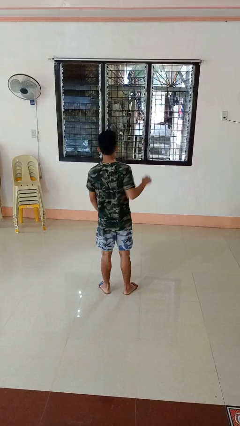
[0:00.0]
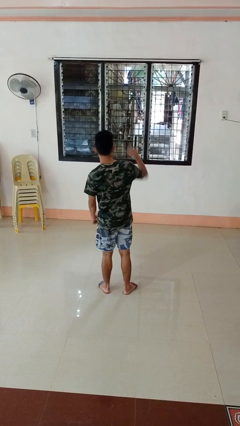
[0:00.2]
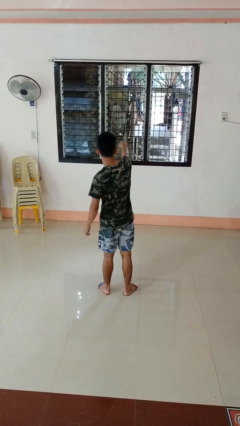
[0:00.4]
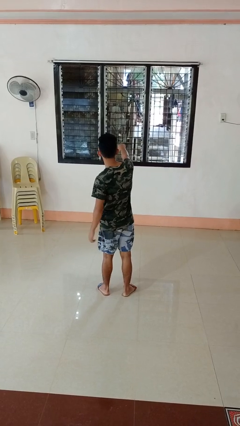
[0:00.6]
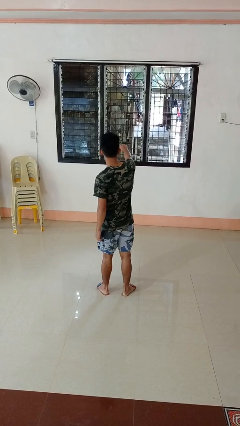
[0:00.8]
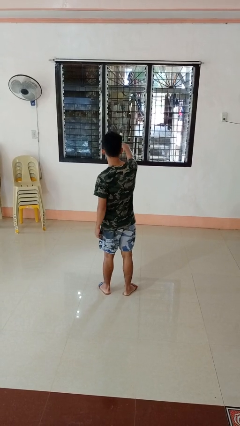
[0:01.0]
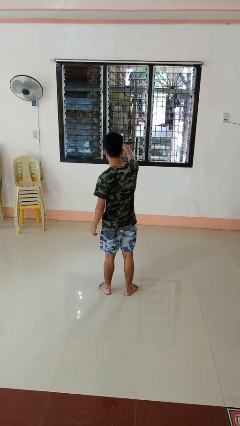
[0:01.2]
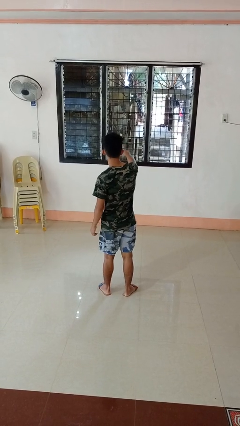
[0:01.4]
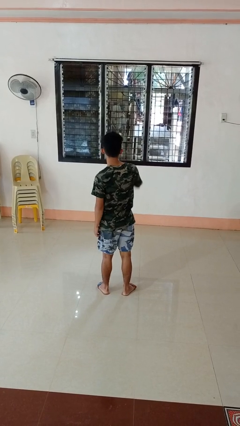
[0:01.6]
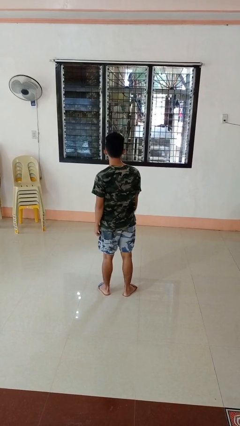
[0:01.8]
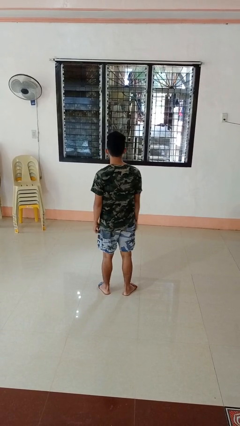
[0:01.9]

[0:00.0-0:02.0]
person punches

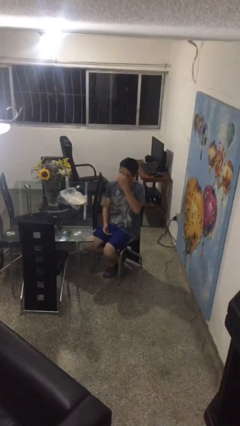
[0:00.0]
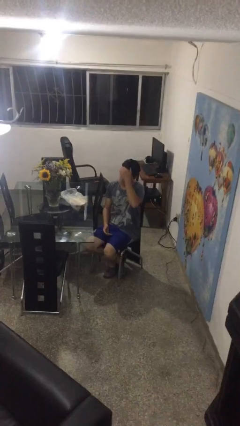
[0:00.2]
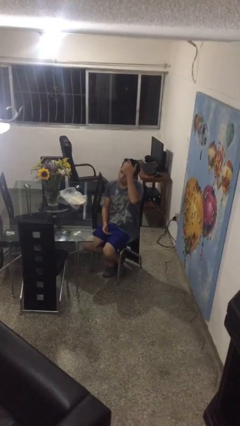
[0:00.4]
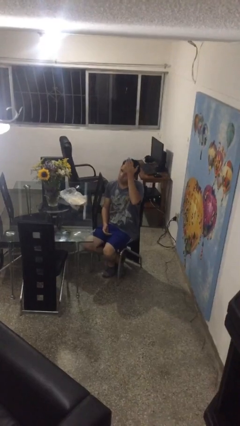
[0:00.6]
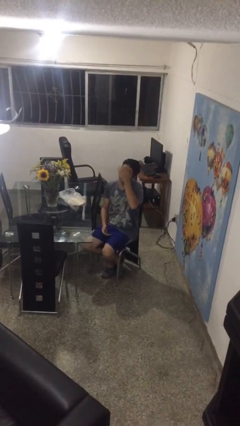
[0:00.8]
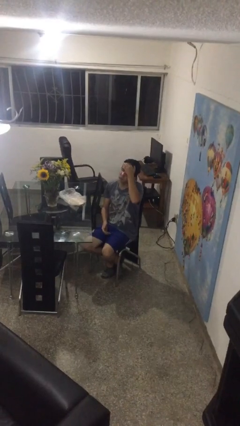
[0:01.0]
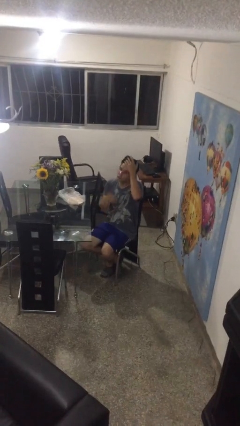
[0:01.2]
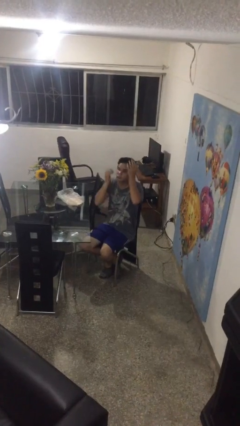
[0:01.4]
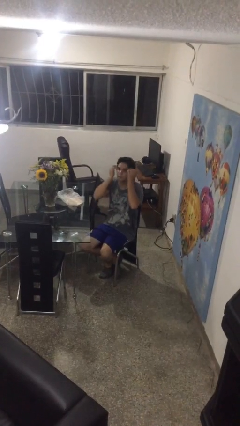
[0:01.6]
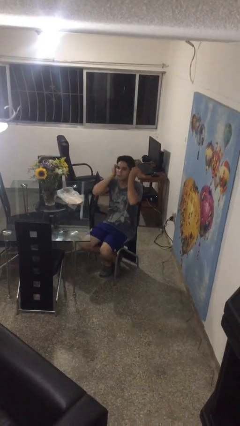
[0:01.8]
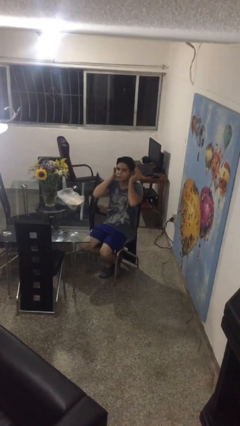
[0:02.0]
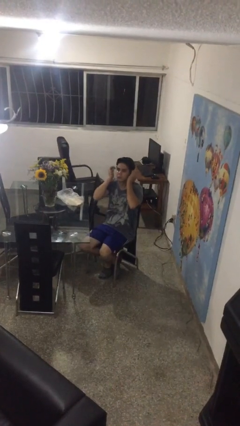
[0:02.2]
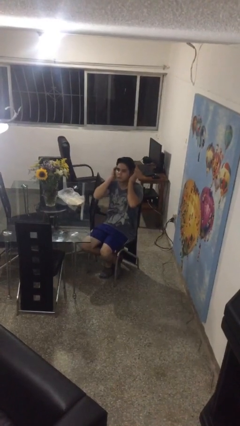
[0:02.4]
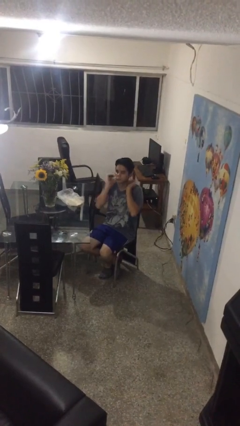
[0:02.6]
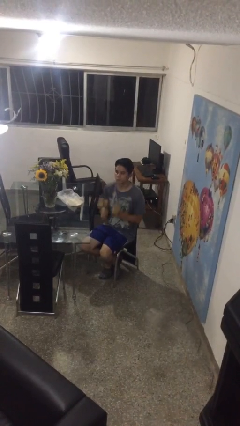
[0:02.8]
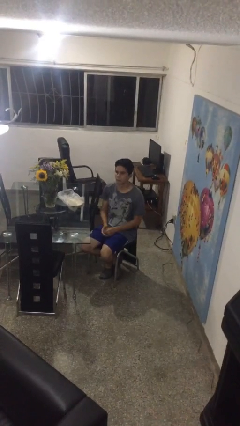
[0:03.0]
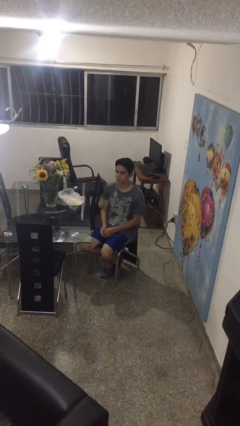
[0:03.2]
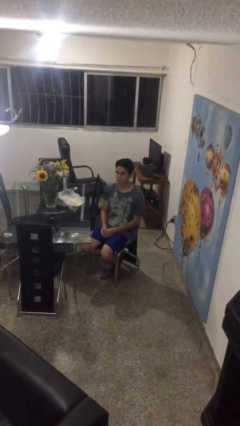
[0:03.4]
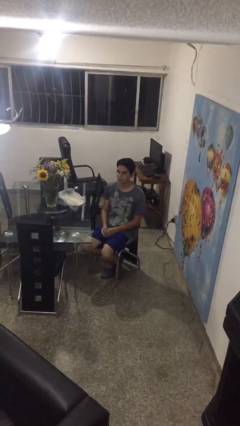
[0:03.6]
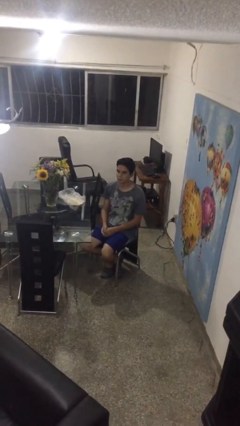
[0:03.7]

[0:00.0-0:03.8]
person strokes hair

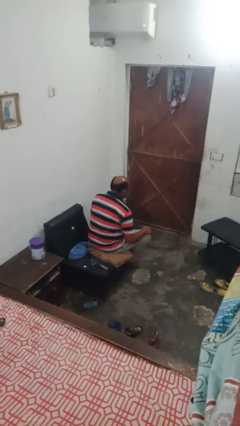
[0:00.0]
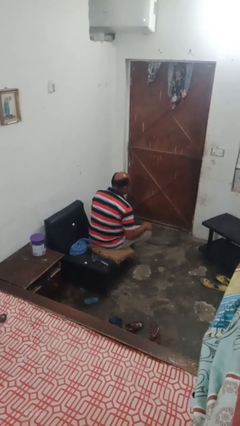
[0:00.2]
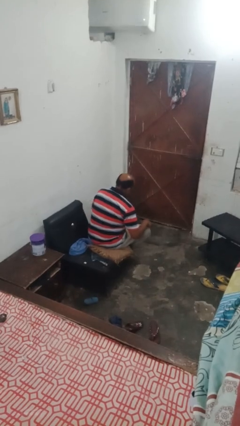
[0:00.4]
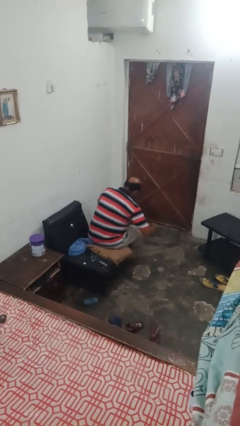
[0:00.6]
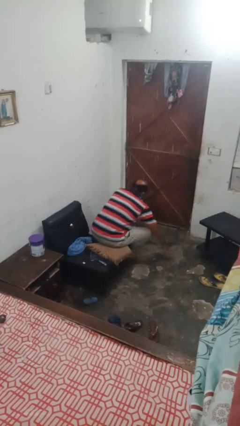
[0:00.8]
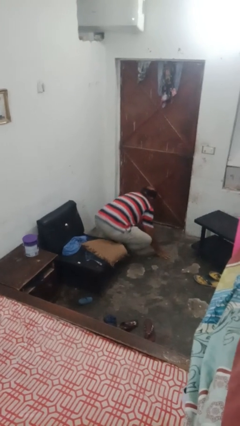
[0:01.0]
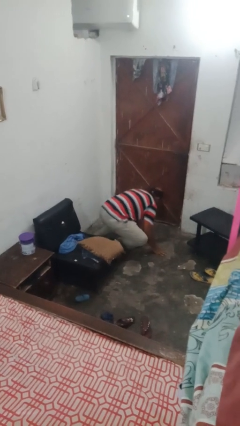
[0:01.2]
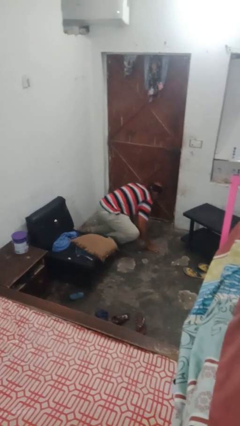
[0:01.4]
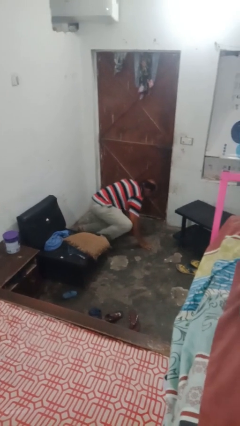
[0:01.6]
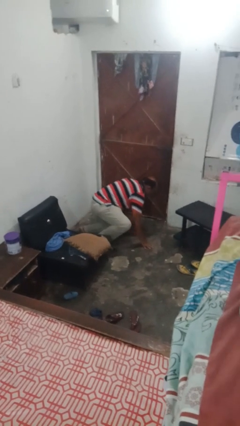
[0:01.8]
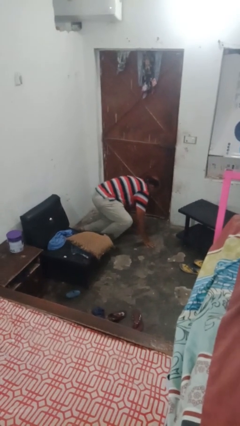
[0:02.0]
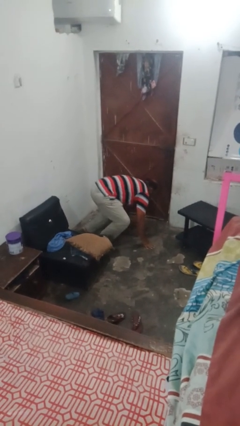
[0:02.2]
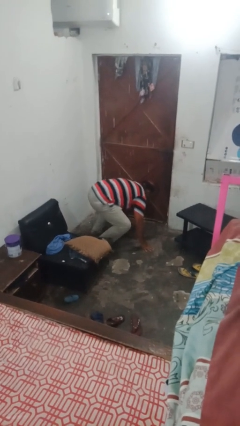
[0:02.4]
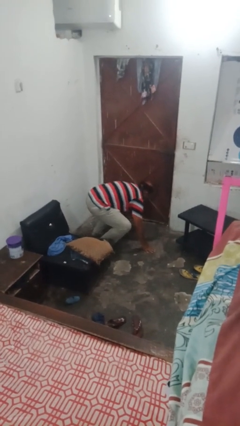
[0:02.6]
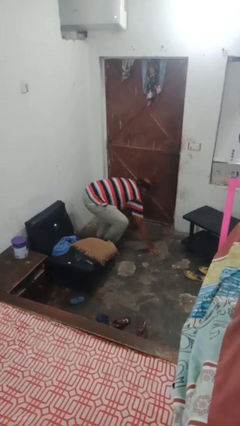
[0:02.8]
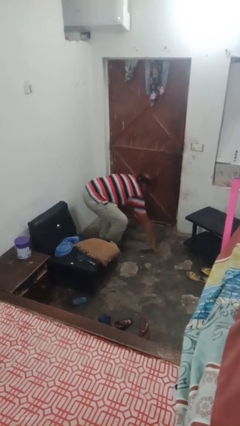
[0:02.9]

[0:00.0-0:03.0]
person falls from chair

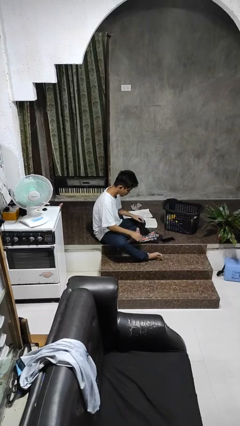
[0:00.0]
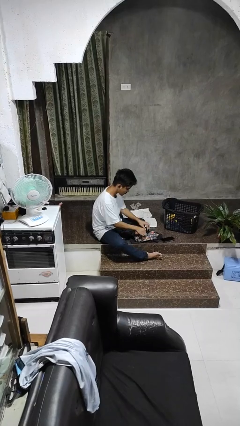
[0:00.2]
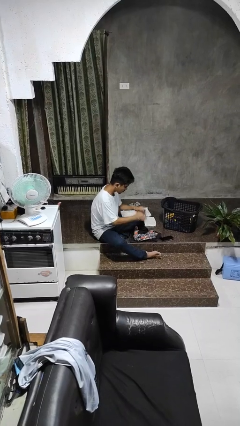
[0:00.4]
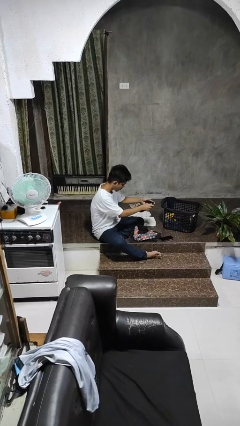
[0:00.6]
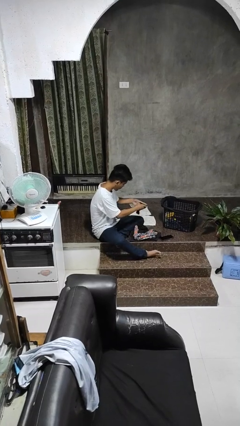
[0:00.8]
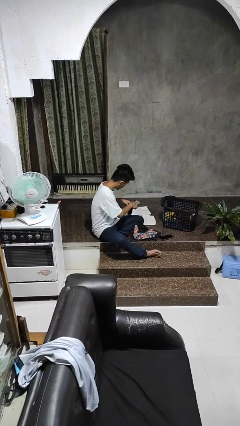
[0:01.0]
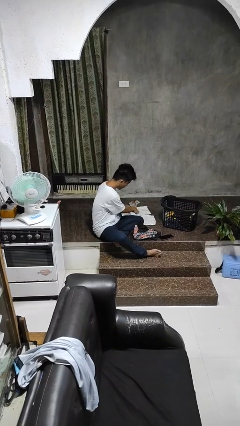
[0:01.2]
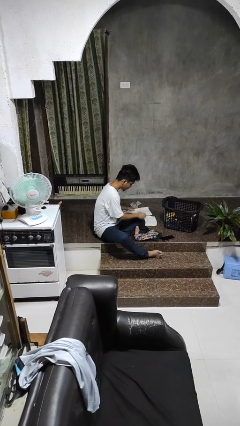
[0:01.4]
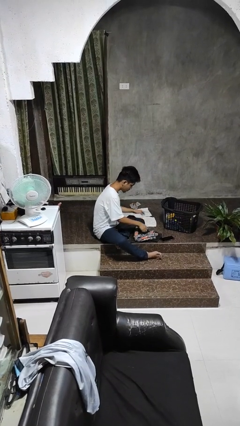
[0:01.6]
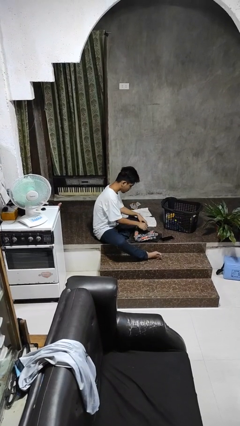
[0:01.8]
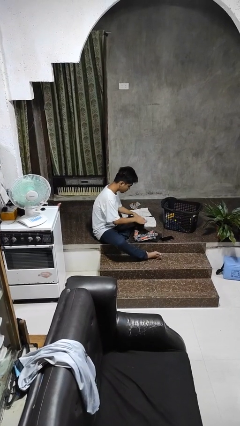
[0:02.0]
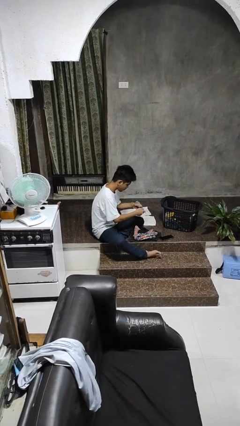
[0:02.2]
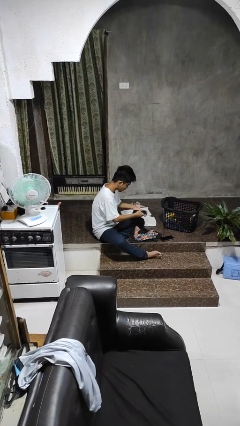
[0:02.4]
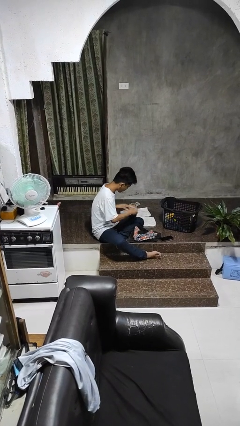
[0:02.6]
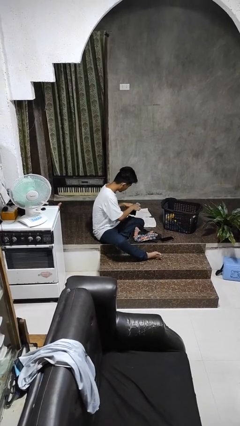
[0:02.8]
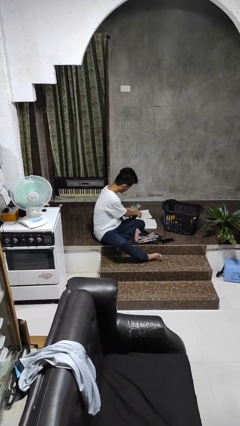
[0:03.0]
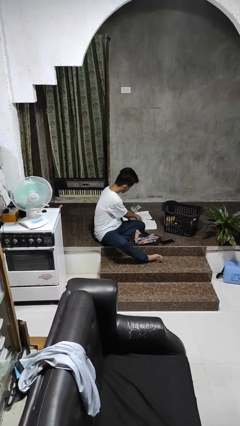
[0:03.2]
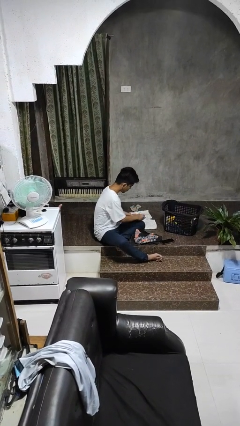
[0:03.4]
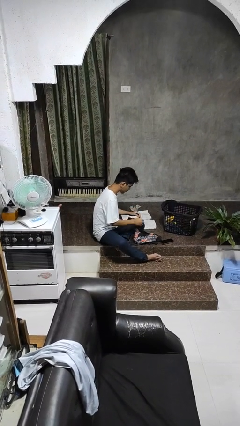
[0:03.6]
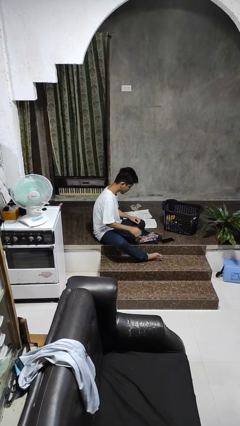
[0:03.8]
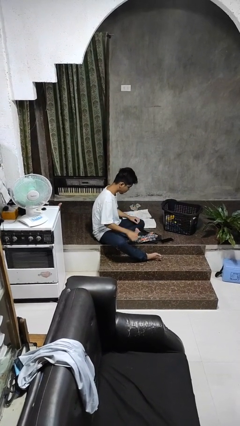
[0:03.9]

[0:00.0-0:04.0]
person folds socks

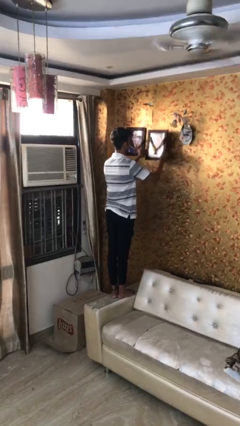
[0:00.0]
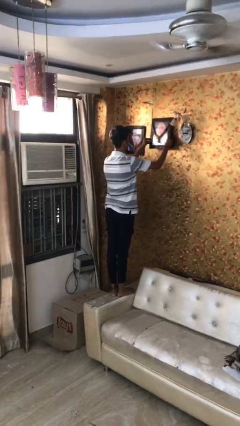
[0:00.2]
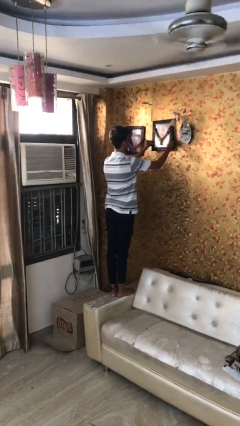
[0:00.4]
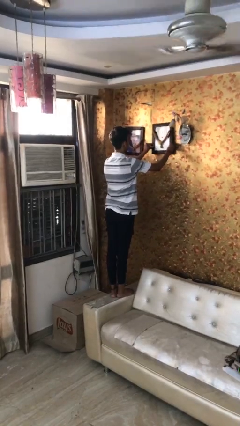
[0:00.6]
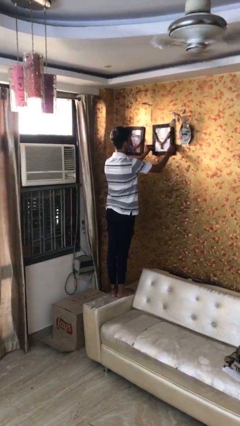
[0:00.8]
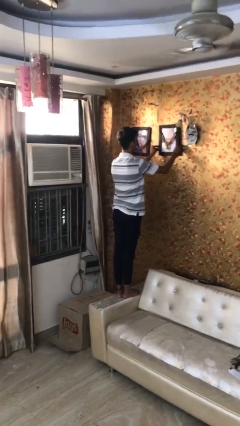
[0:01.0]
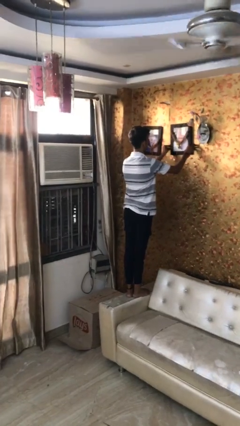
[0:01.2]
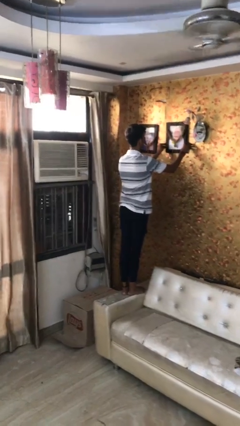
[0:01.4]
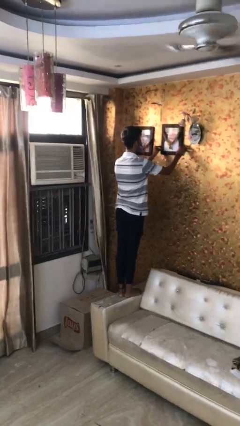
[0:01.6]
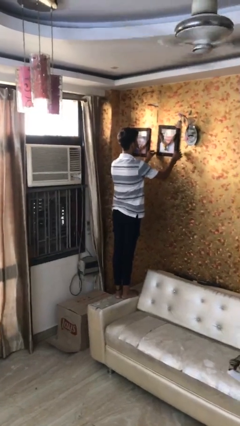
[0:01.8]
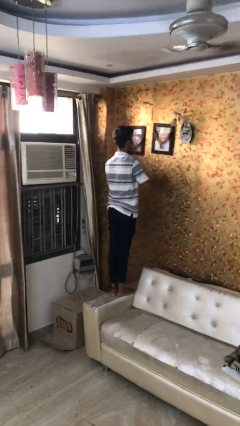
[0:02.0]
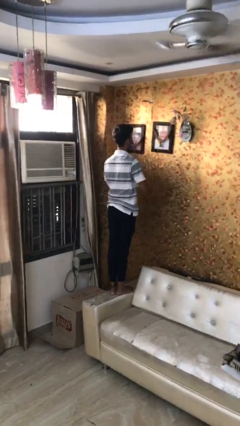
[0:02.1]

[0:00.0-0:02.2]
person puts up picture frame

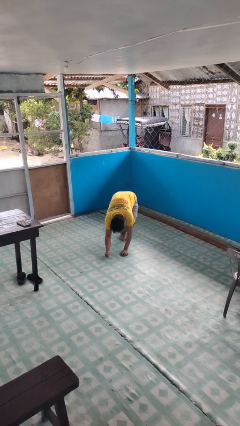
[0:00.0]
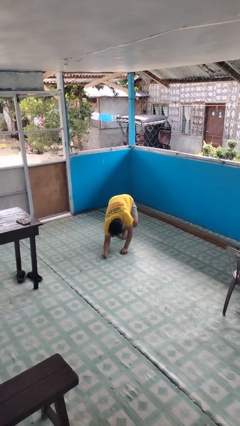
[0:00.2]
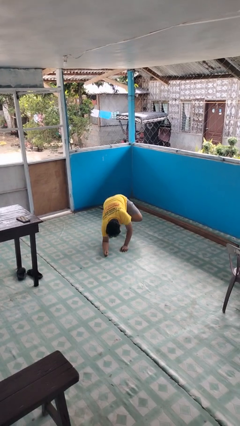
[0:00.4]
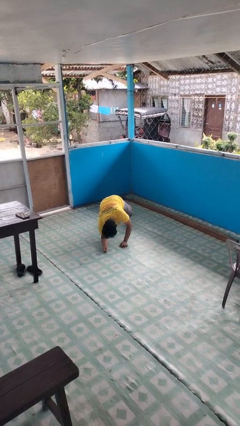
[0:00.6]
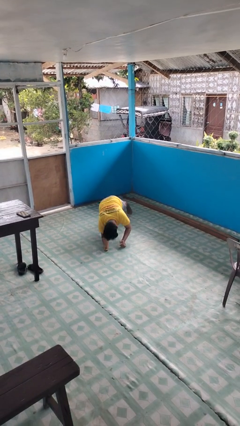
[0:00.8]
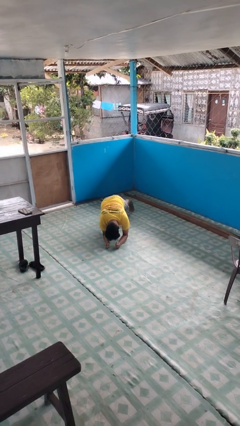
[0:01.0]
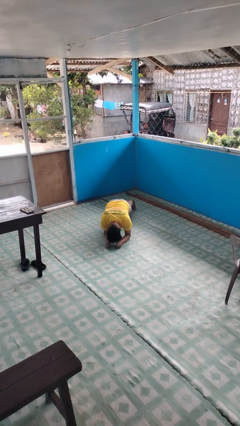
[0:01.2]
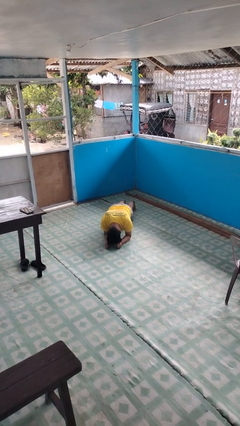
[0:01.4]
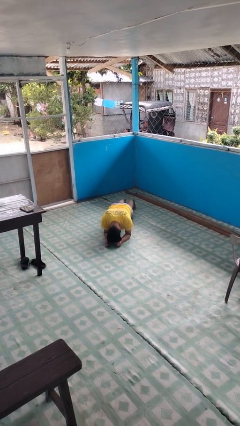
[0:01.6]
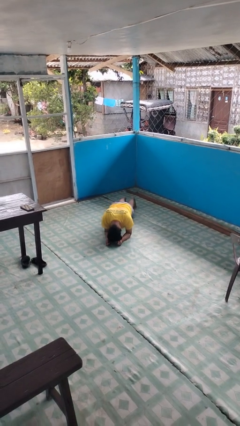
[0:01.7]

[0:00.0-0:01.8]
person exercises with plank

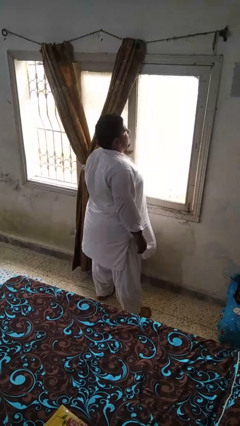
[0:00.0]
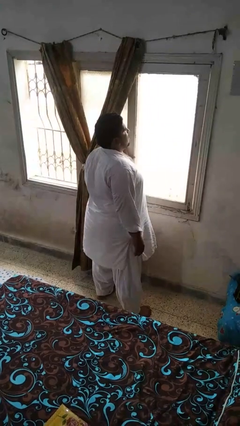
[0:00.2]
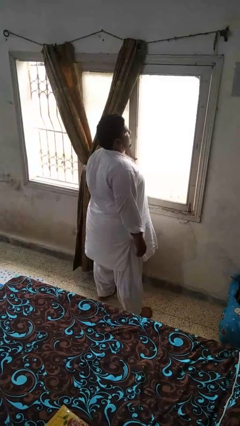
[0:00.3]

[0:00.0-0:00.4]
person opens home window

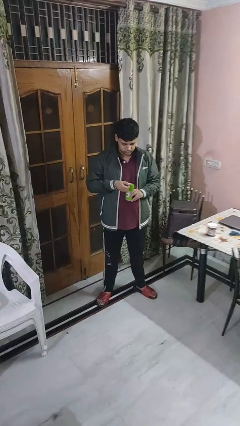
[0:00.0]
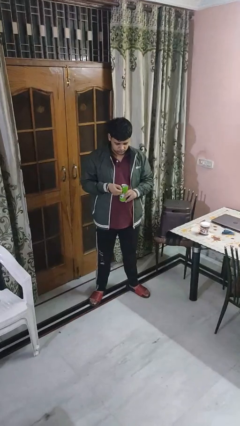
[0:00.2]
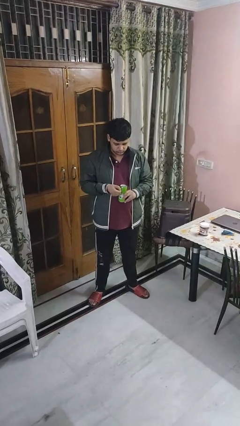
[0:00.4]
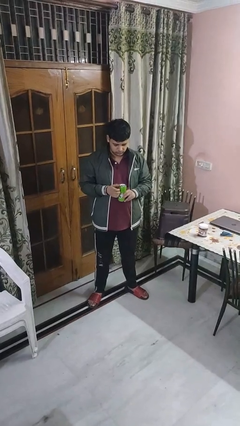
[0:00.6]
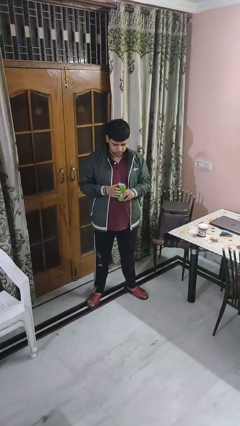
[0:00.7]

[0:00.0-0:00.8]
person opens beverage can
